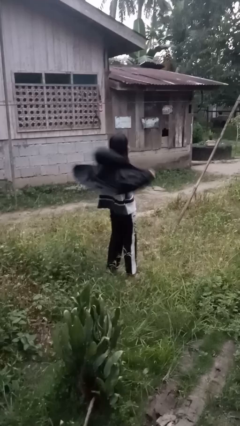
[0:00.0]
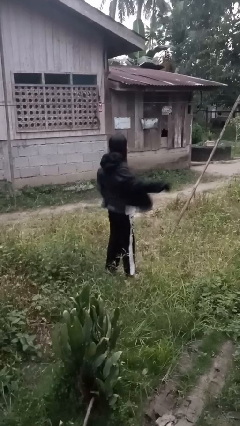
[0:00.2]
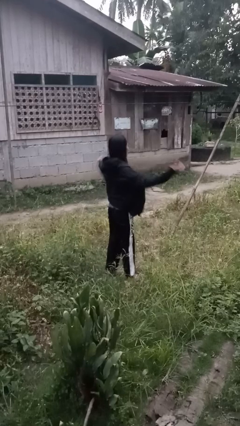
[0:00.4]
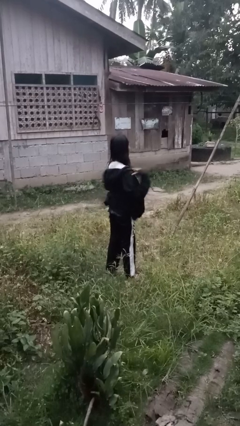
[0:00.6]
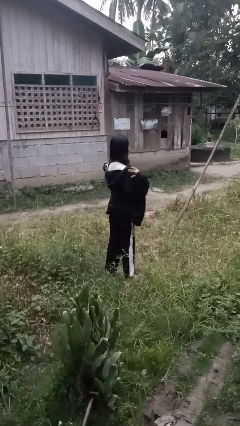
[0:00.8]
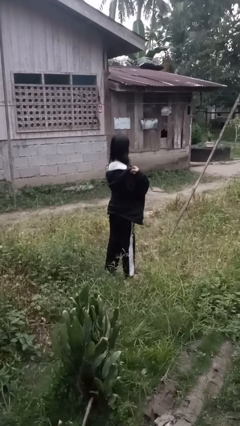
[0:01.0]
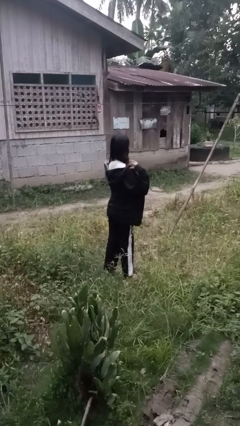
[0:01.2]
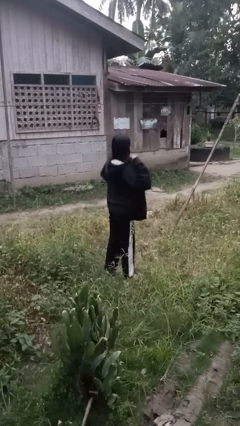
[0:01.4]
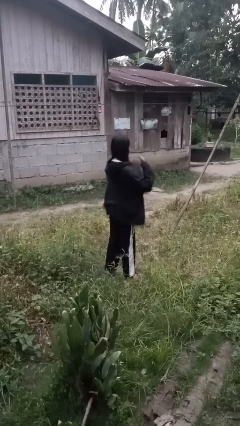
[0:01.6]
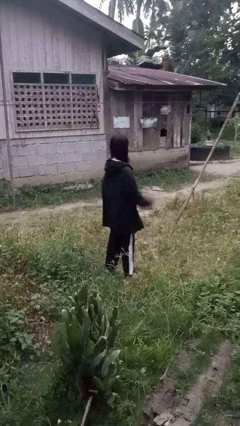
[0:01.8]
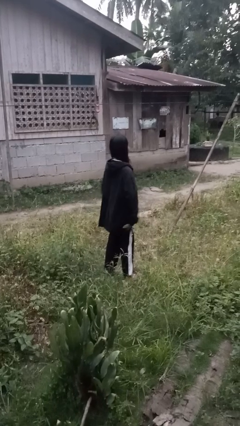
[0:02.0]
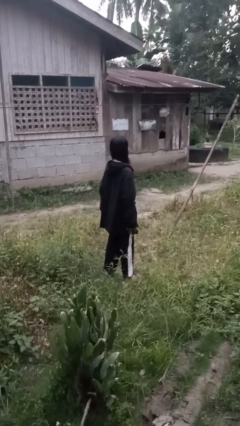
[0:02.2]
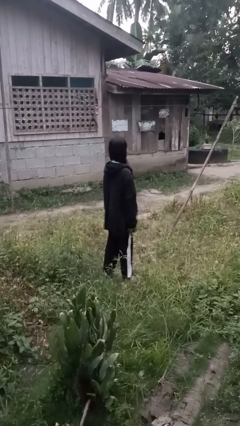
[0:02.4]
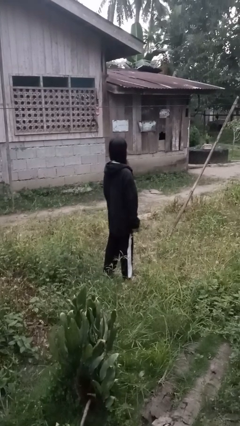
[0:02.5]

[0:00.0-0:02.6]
person puts on jacket

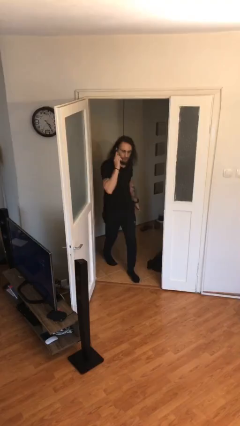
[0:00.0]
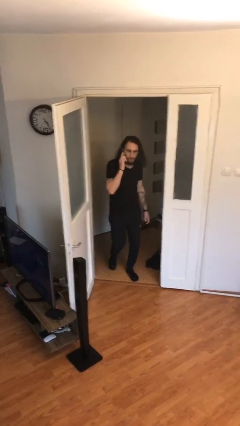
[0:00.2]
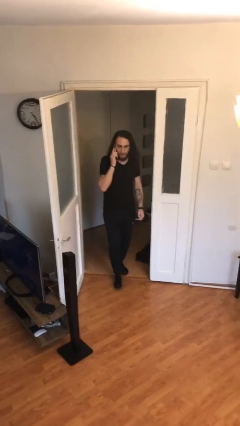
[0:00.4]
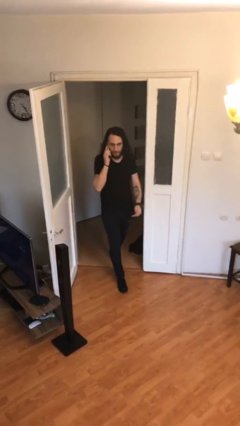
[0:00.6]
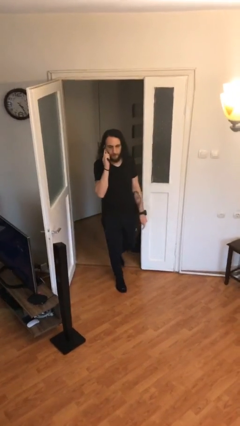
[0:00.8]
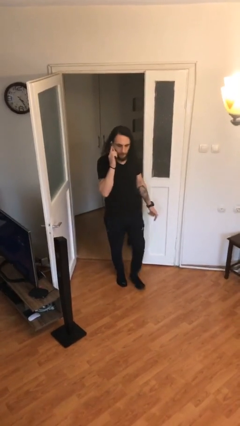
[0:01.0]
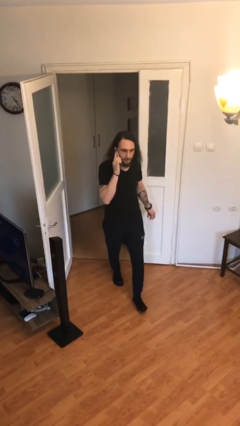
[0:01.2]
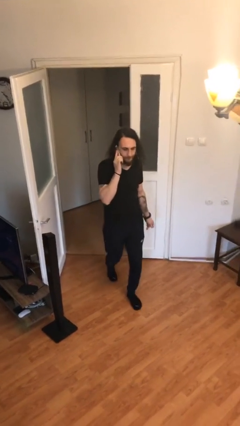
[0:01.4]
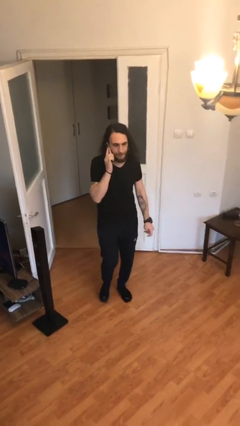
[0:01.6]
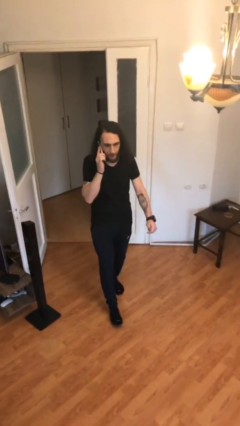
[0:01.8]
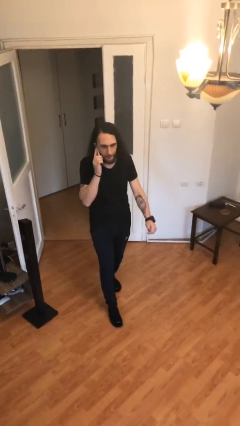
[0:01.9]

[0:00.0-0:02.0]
person enters scene through structure

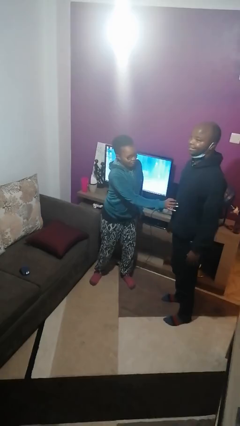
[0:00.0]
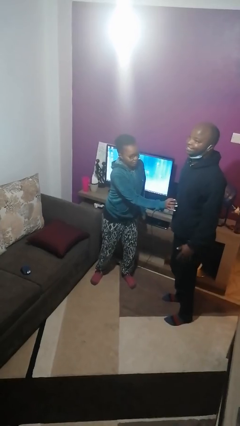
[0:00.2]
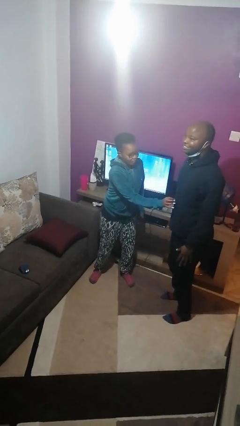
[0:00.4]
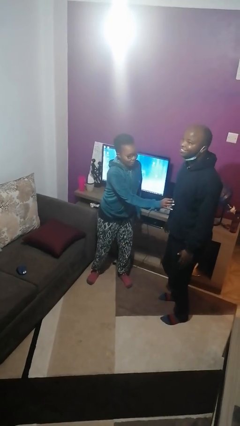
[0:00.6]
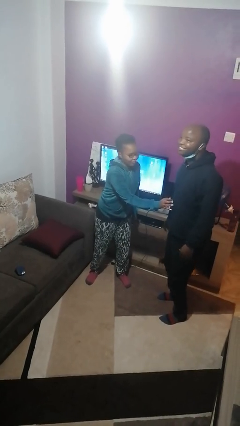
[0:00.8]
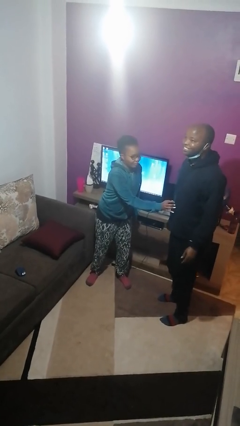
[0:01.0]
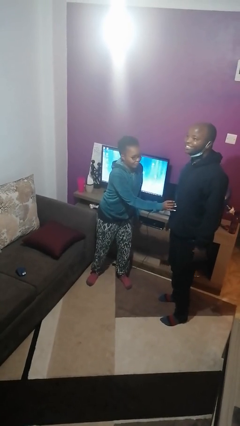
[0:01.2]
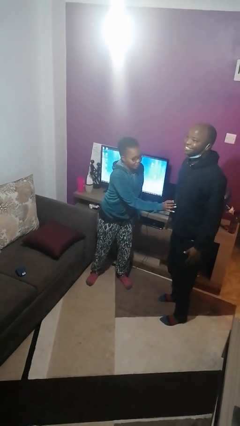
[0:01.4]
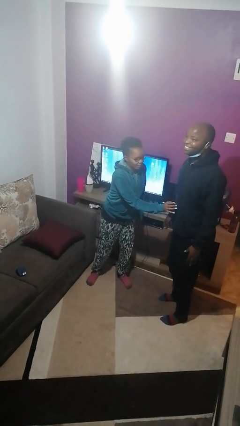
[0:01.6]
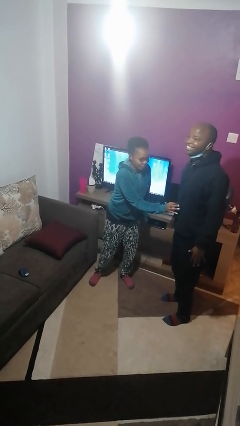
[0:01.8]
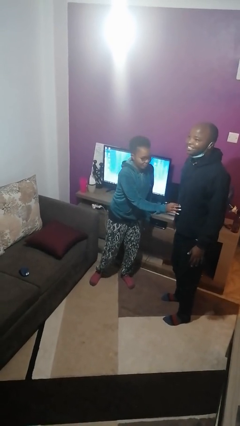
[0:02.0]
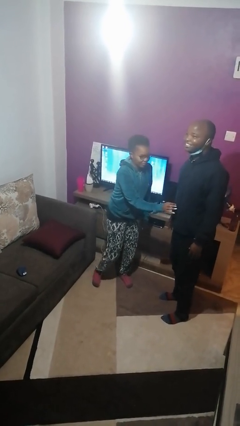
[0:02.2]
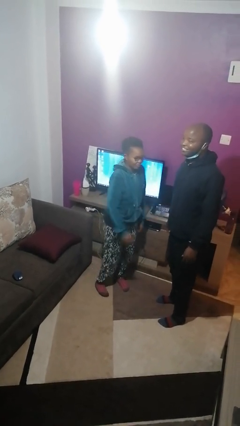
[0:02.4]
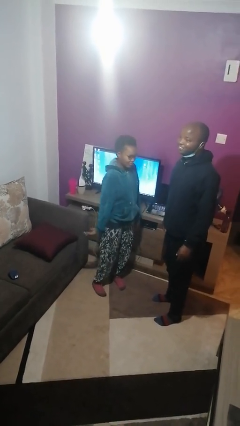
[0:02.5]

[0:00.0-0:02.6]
person tickles person

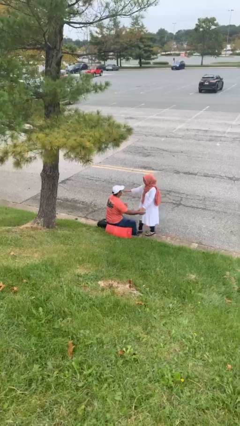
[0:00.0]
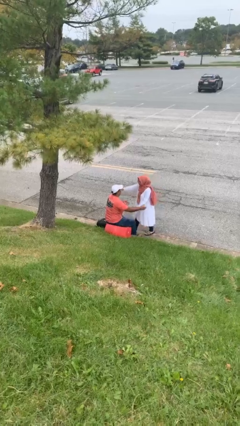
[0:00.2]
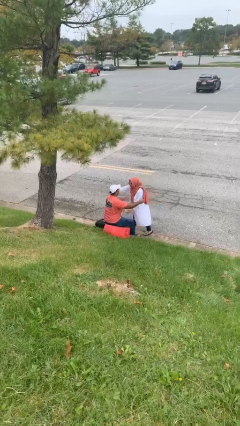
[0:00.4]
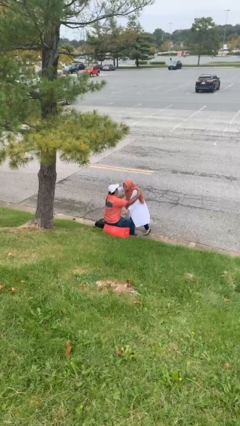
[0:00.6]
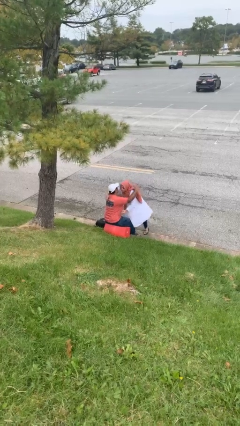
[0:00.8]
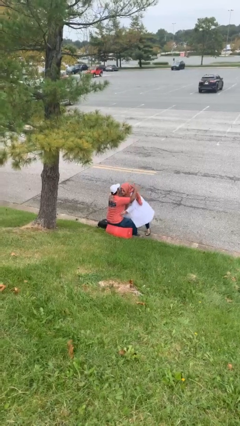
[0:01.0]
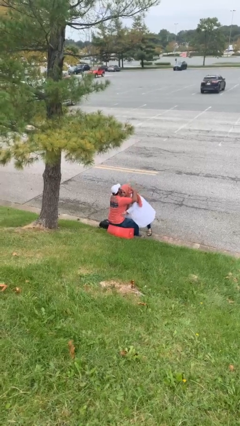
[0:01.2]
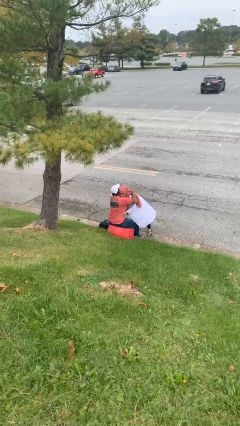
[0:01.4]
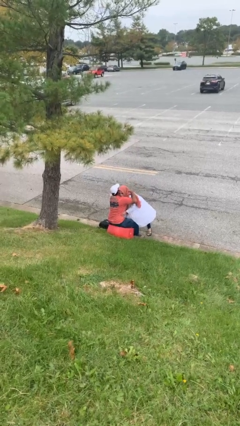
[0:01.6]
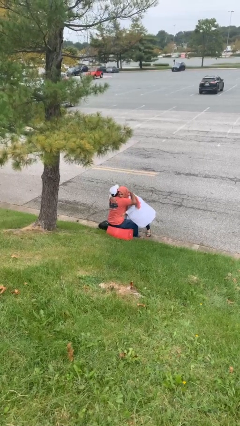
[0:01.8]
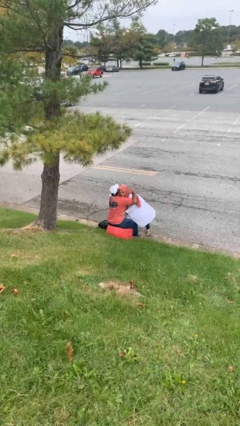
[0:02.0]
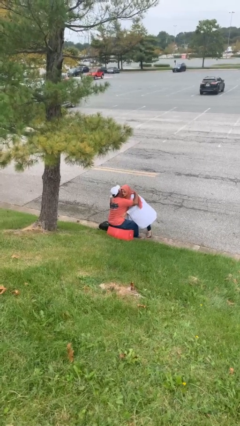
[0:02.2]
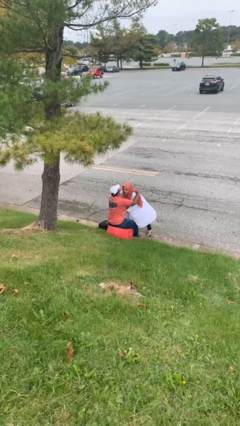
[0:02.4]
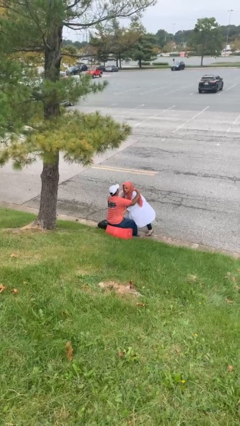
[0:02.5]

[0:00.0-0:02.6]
person embraces person

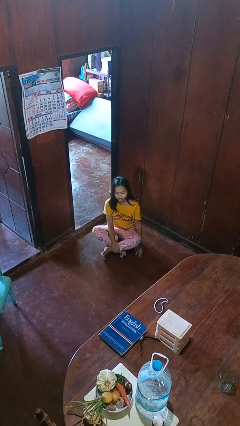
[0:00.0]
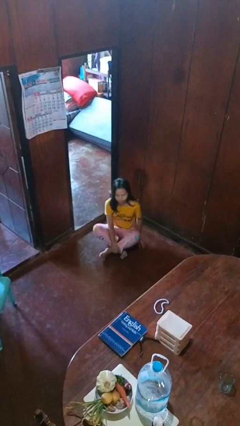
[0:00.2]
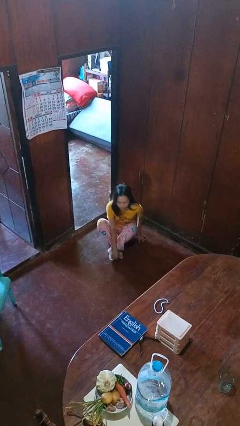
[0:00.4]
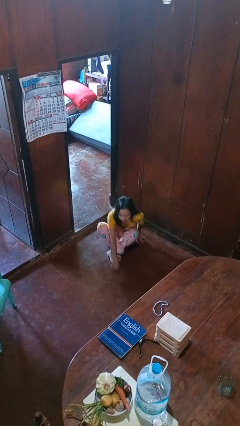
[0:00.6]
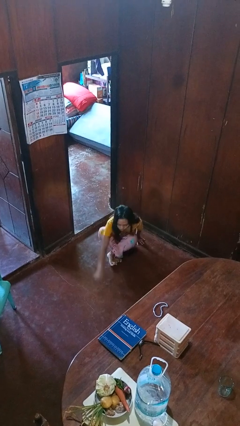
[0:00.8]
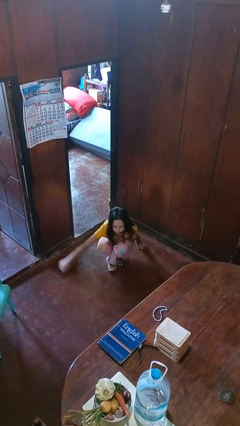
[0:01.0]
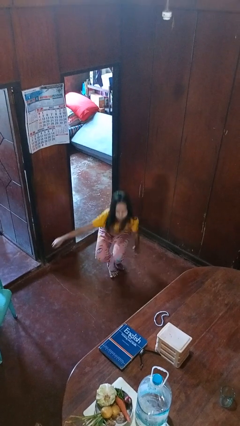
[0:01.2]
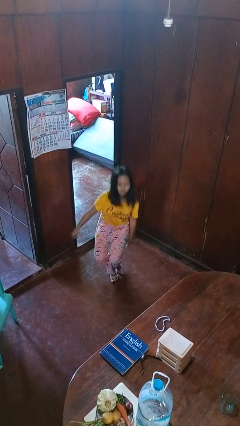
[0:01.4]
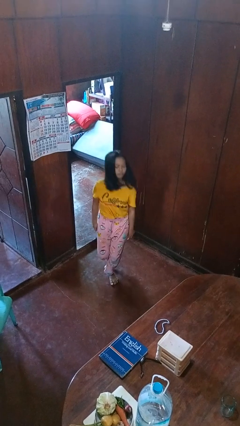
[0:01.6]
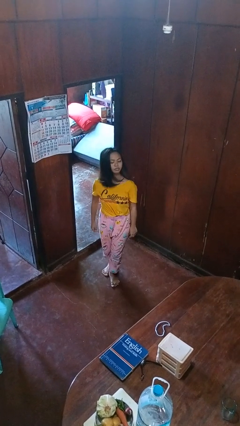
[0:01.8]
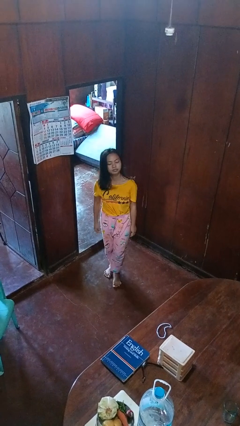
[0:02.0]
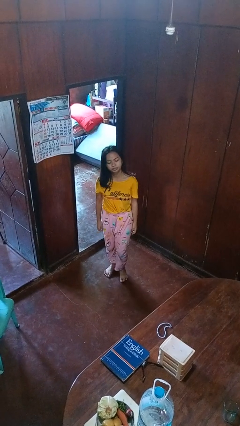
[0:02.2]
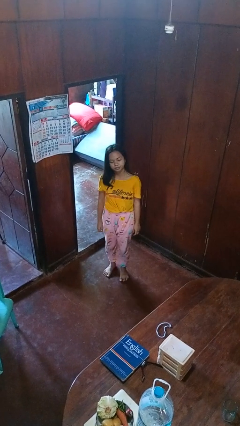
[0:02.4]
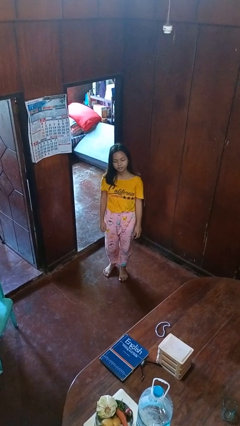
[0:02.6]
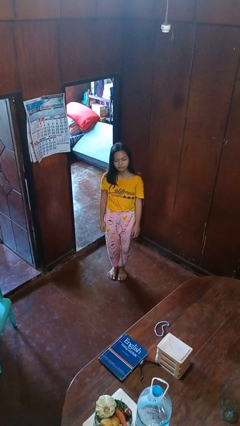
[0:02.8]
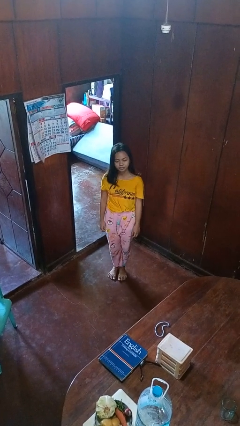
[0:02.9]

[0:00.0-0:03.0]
person stands up from floor

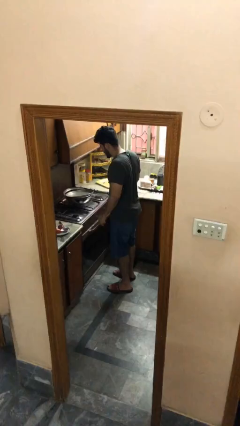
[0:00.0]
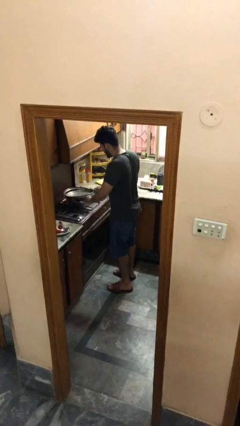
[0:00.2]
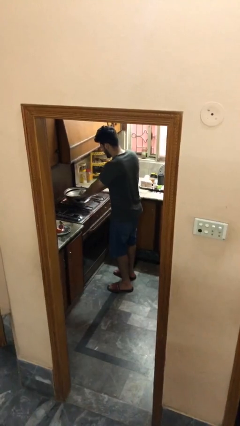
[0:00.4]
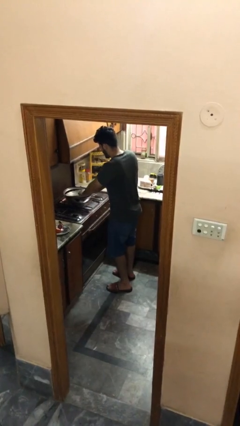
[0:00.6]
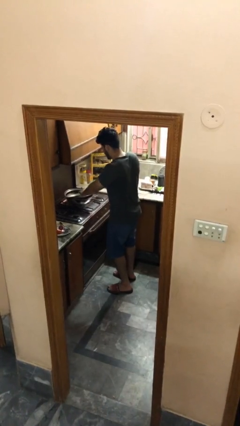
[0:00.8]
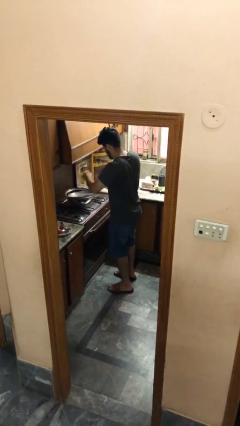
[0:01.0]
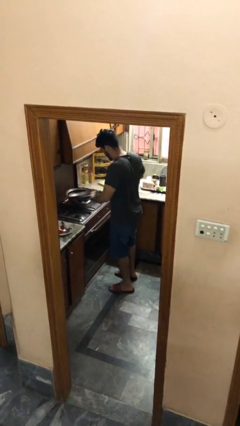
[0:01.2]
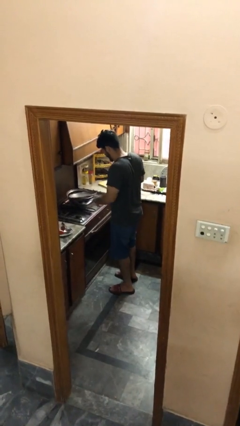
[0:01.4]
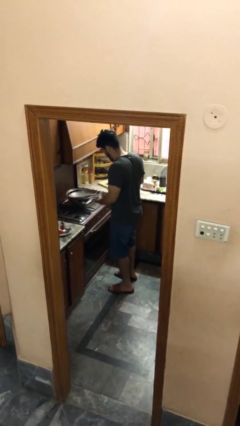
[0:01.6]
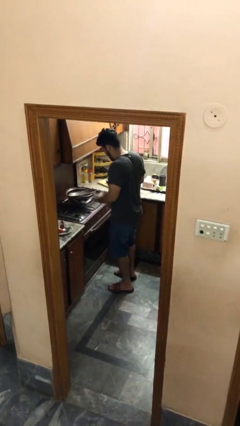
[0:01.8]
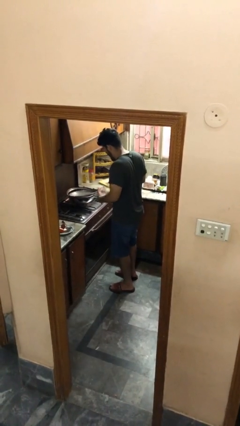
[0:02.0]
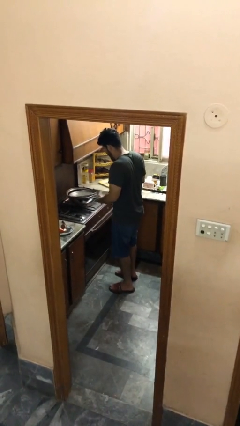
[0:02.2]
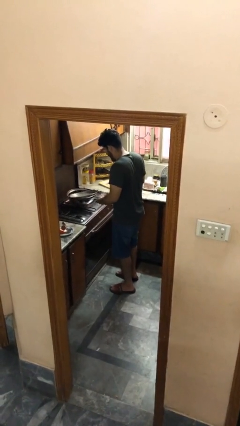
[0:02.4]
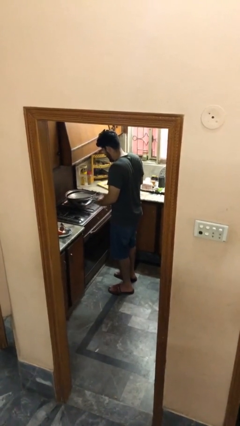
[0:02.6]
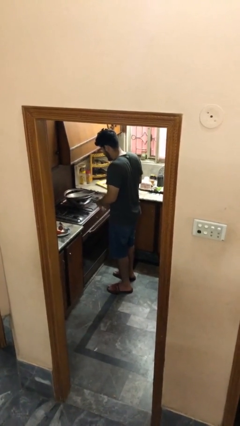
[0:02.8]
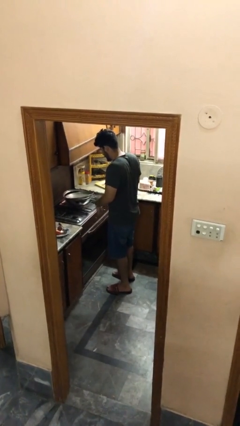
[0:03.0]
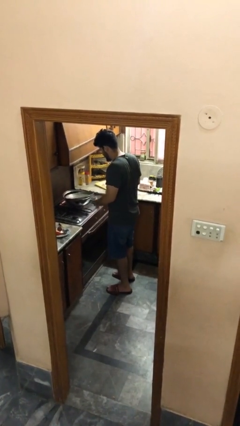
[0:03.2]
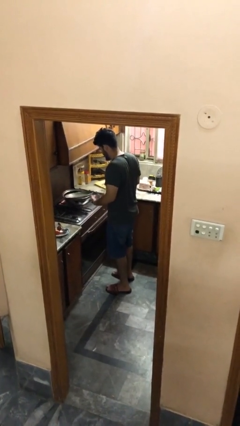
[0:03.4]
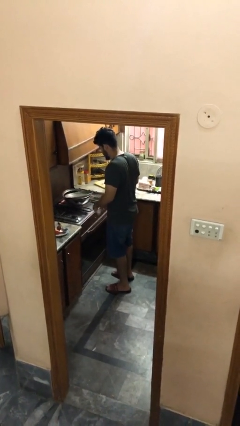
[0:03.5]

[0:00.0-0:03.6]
person burns hand

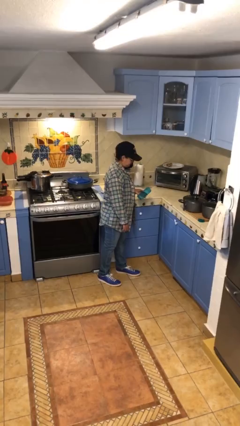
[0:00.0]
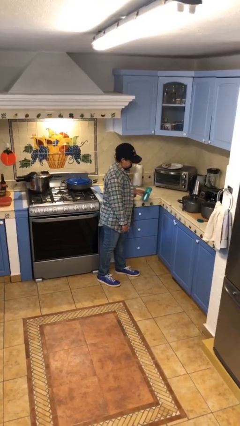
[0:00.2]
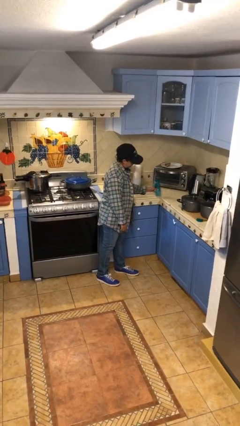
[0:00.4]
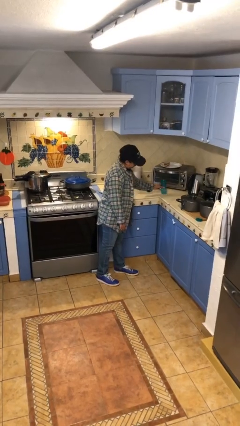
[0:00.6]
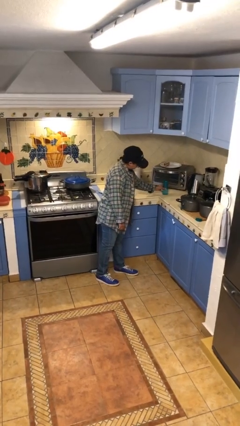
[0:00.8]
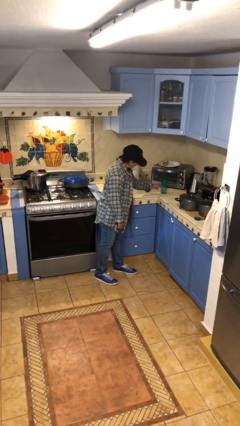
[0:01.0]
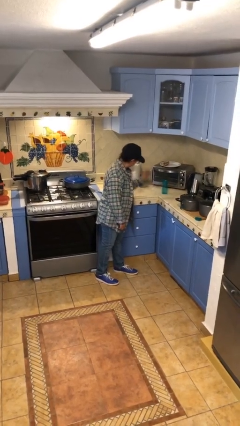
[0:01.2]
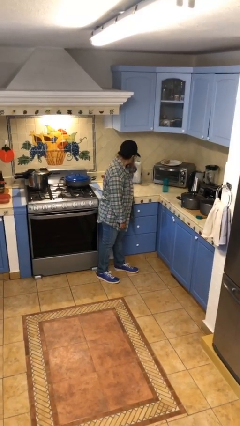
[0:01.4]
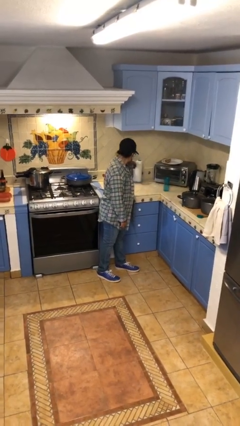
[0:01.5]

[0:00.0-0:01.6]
person puts down object on countertop
